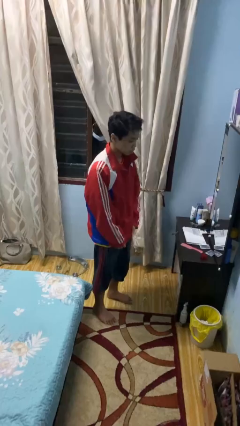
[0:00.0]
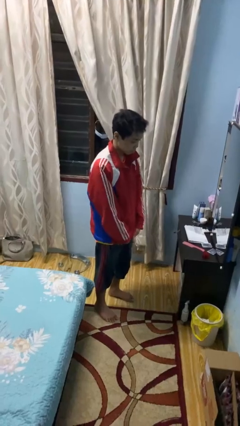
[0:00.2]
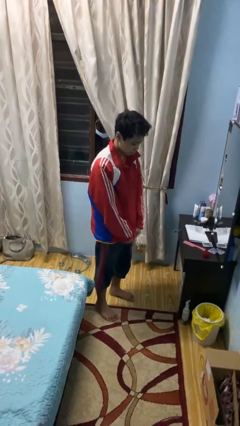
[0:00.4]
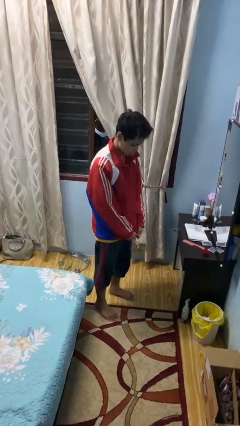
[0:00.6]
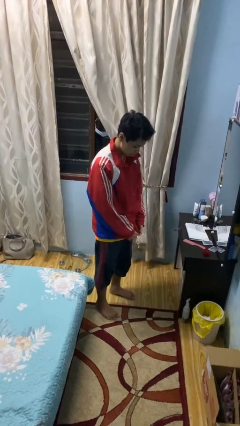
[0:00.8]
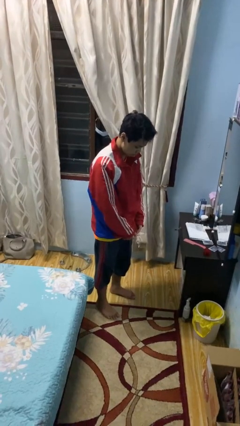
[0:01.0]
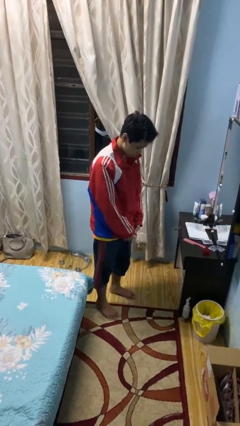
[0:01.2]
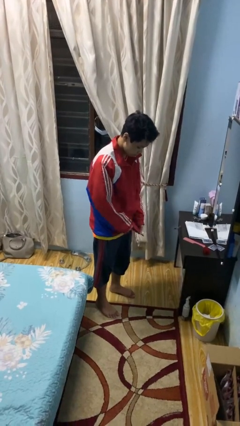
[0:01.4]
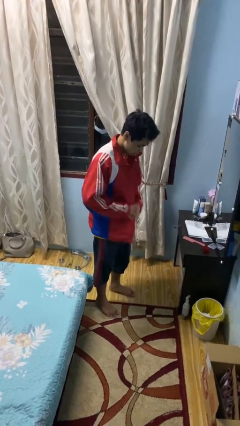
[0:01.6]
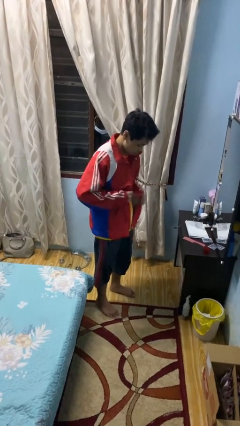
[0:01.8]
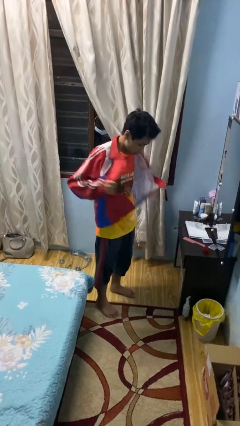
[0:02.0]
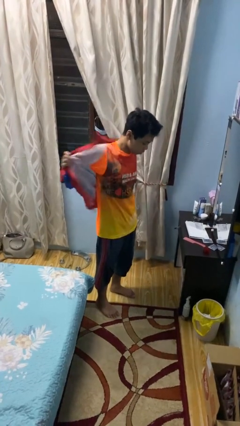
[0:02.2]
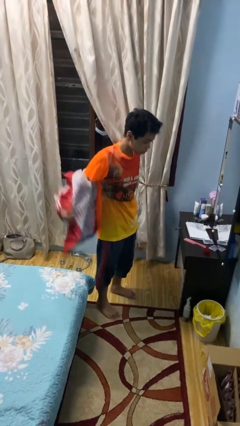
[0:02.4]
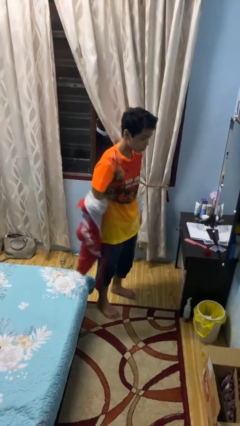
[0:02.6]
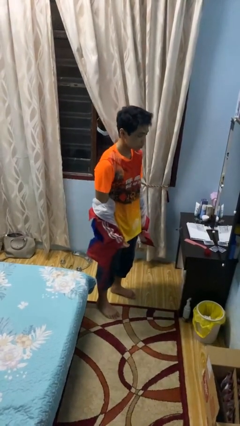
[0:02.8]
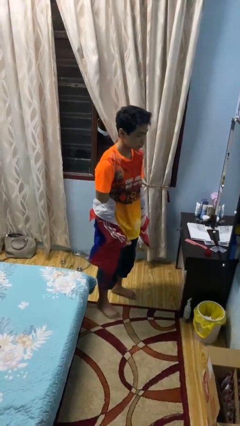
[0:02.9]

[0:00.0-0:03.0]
person takes off jacket

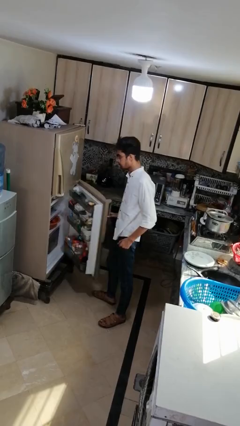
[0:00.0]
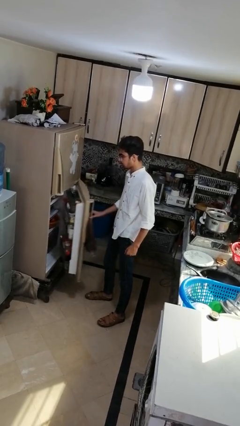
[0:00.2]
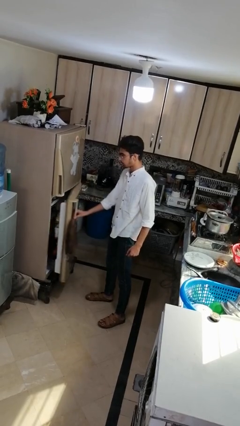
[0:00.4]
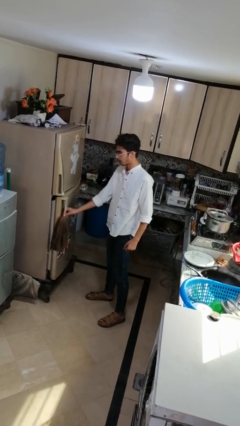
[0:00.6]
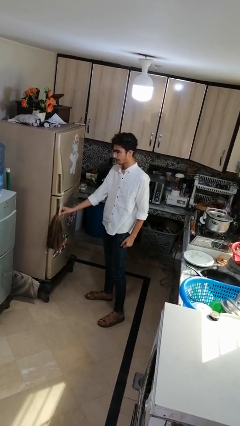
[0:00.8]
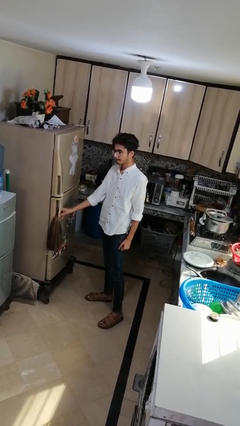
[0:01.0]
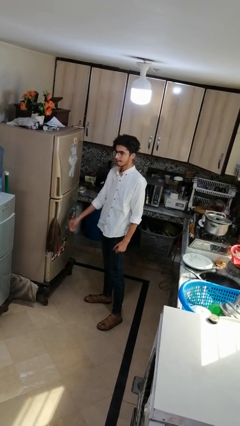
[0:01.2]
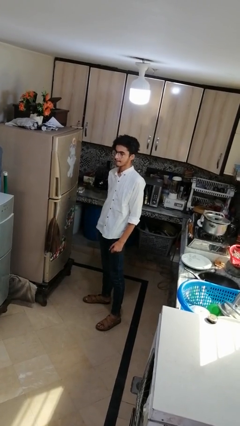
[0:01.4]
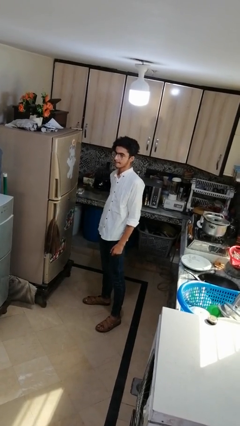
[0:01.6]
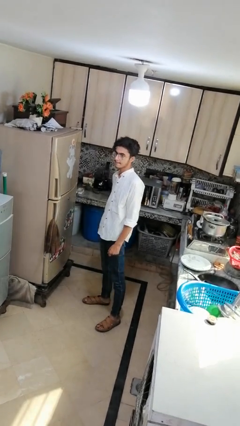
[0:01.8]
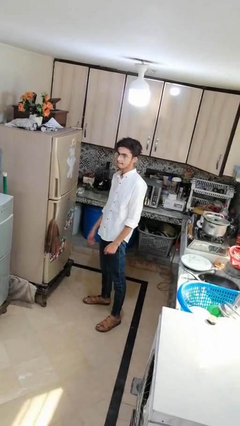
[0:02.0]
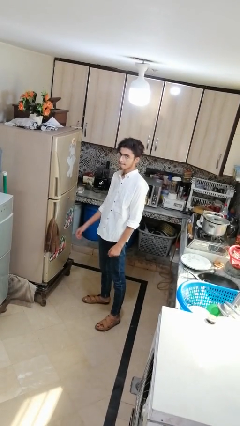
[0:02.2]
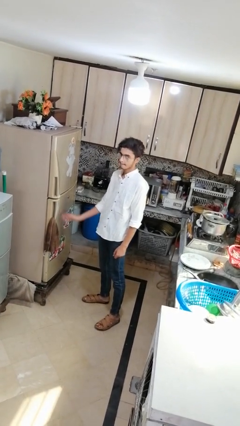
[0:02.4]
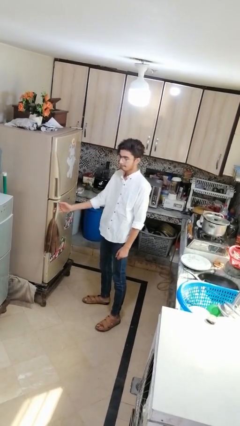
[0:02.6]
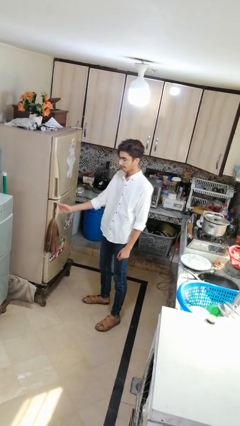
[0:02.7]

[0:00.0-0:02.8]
person closes refrigerator

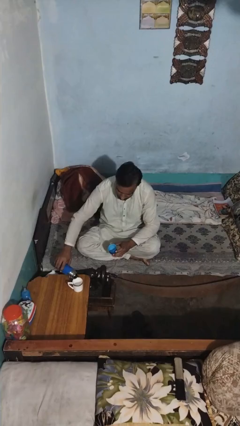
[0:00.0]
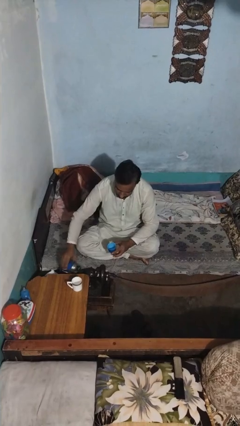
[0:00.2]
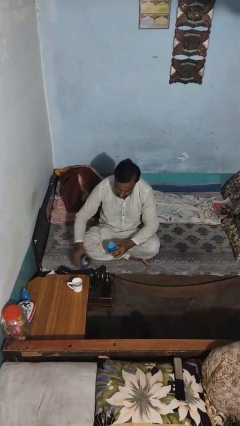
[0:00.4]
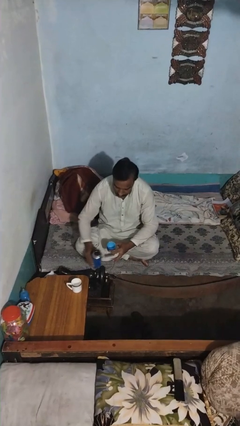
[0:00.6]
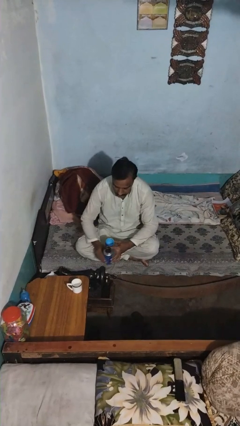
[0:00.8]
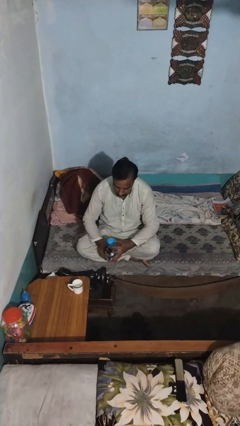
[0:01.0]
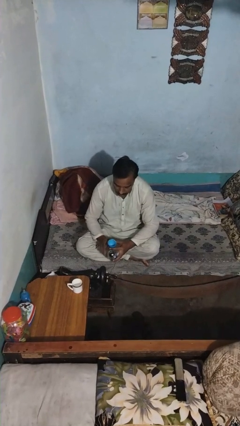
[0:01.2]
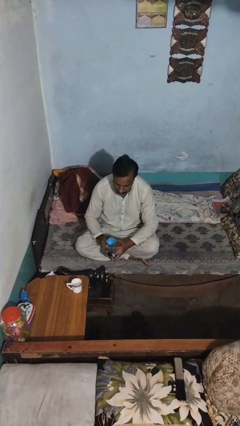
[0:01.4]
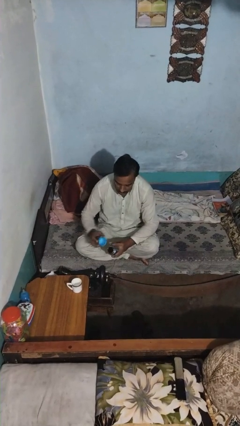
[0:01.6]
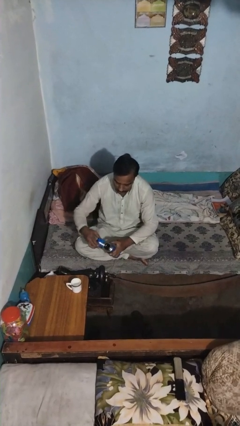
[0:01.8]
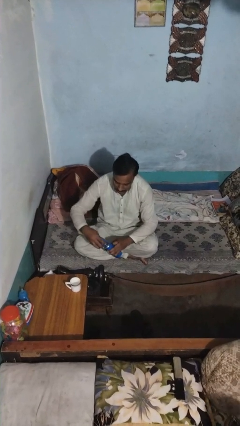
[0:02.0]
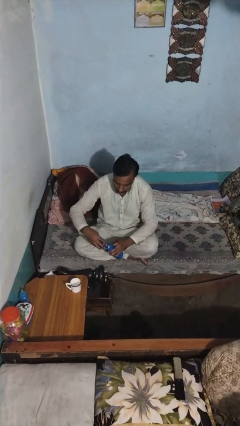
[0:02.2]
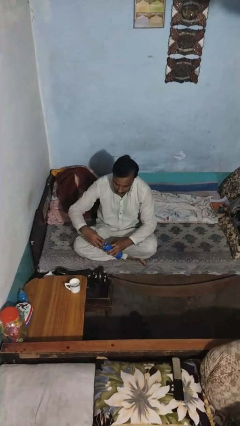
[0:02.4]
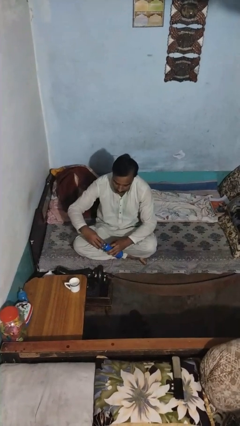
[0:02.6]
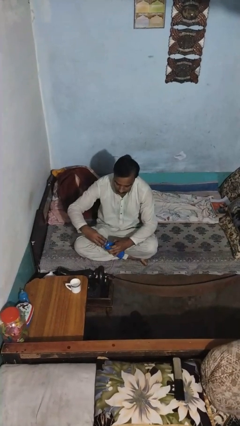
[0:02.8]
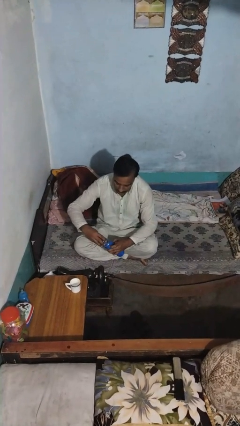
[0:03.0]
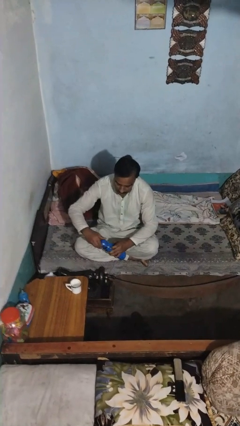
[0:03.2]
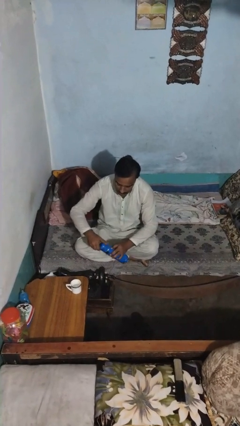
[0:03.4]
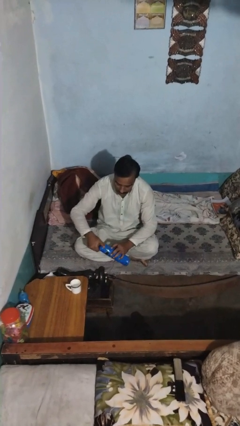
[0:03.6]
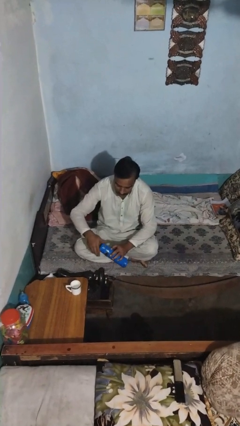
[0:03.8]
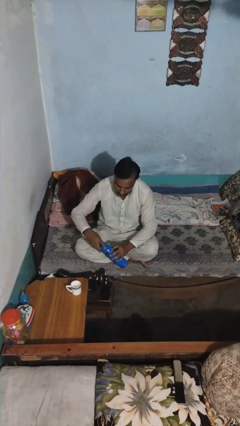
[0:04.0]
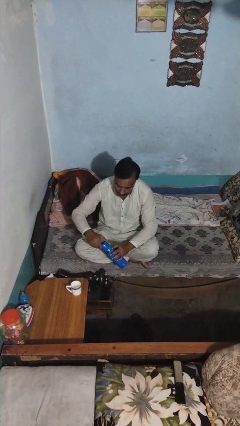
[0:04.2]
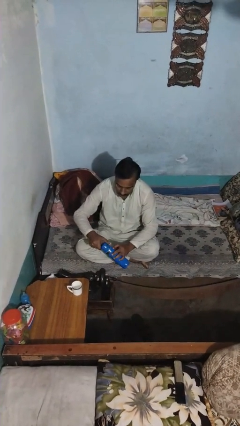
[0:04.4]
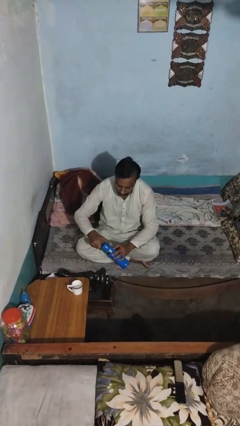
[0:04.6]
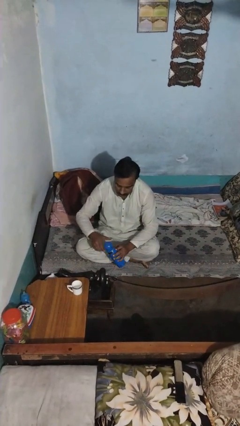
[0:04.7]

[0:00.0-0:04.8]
person screws lid to bottle

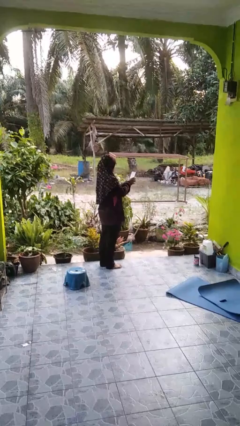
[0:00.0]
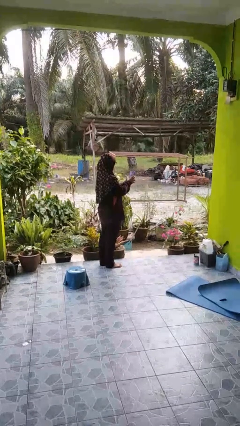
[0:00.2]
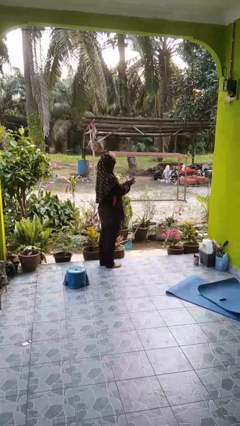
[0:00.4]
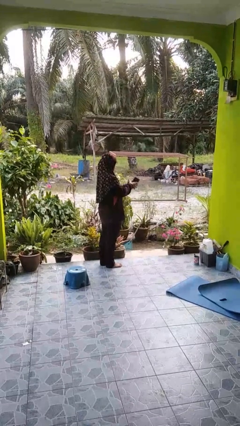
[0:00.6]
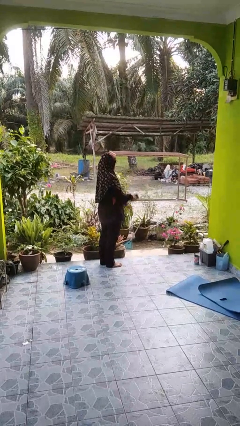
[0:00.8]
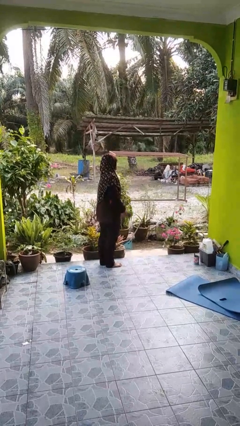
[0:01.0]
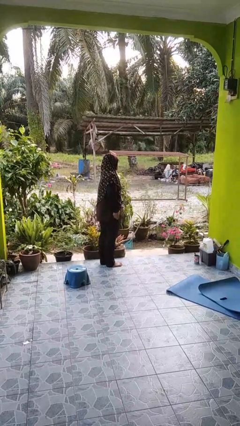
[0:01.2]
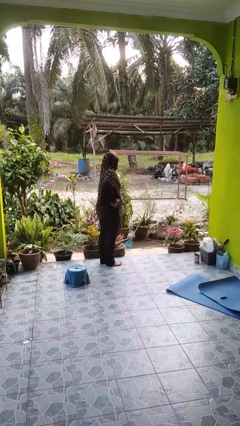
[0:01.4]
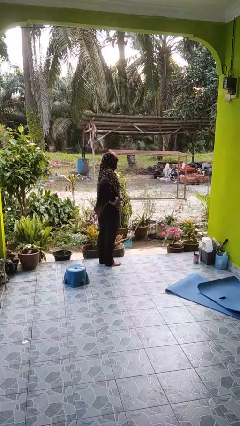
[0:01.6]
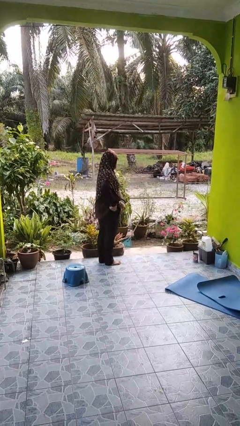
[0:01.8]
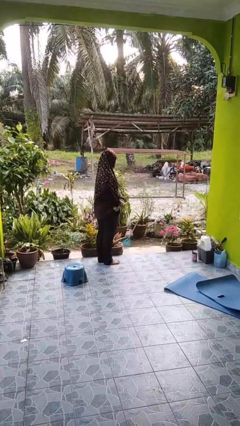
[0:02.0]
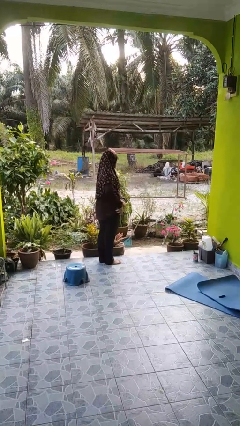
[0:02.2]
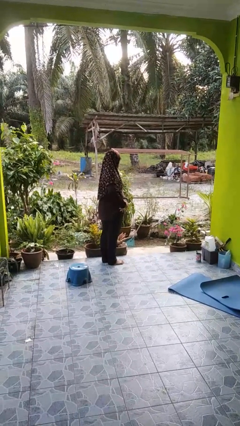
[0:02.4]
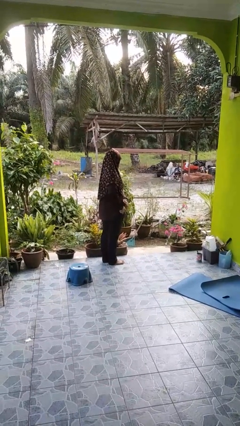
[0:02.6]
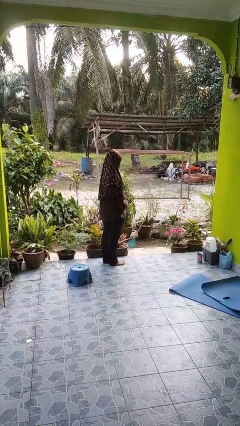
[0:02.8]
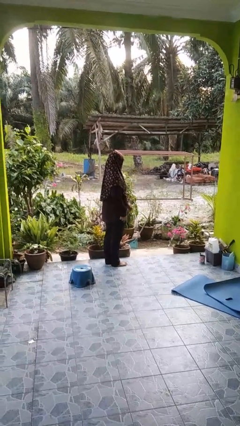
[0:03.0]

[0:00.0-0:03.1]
person puts phone into pocket

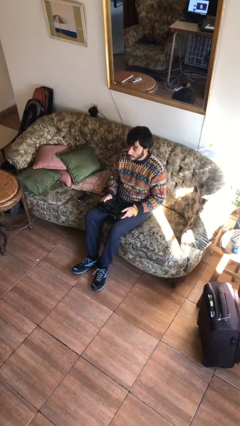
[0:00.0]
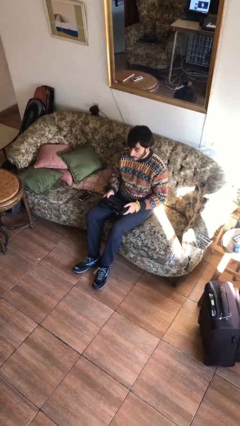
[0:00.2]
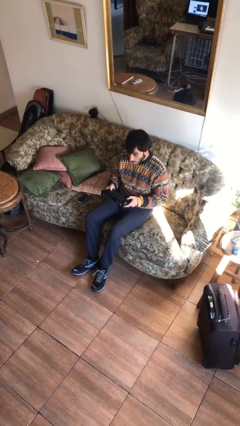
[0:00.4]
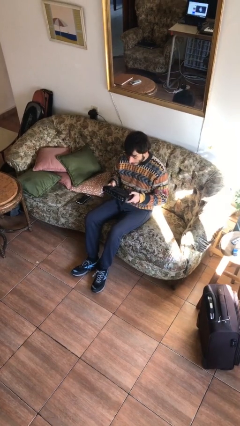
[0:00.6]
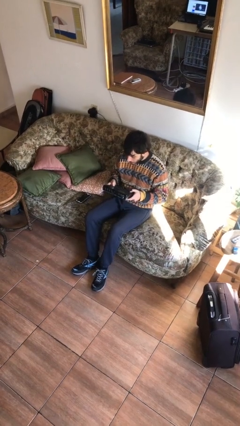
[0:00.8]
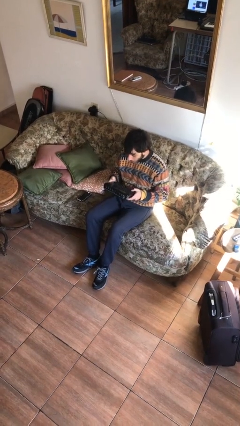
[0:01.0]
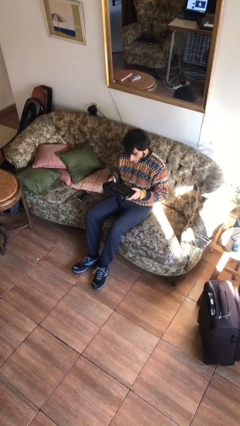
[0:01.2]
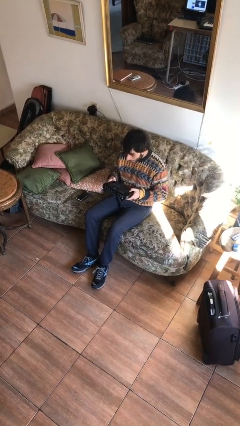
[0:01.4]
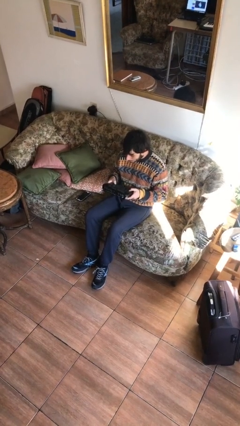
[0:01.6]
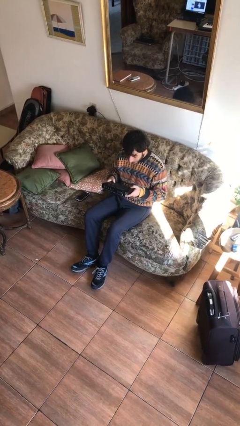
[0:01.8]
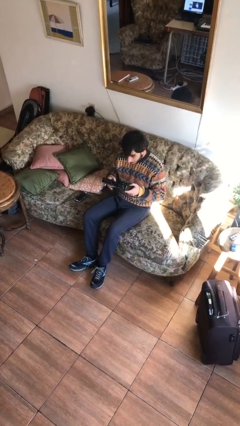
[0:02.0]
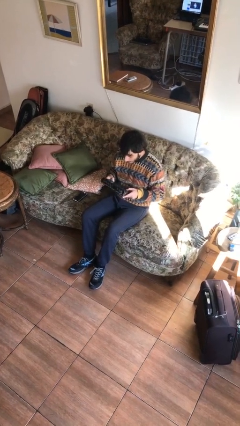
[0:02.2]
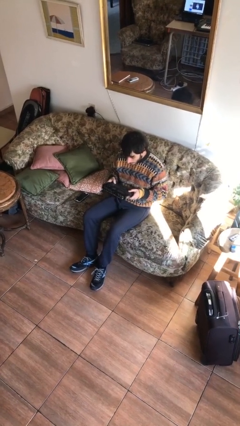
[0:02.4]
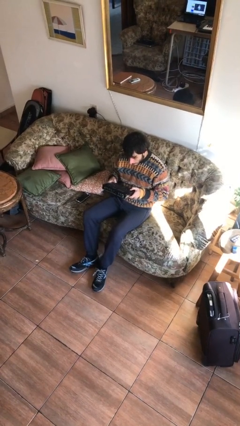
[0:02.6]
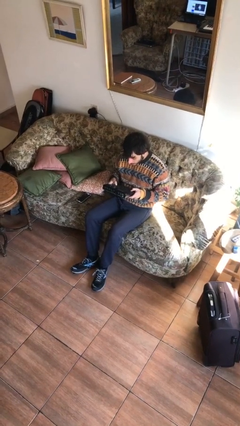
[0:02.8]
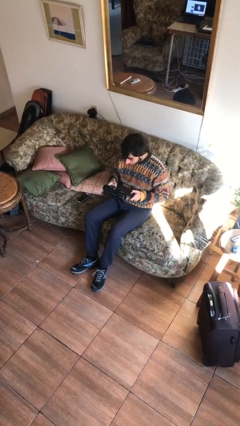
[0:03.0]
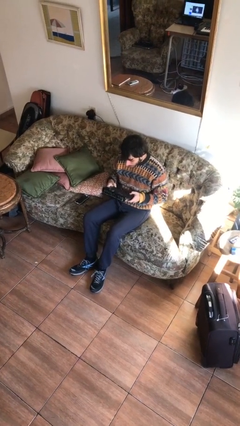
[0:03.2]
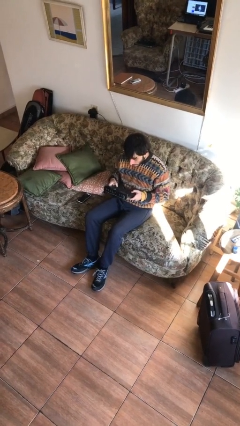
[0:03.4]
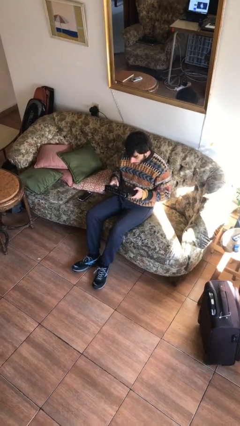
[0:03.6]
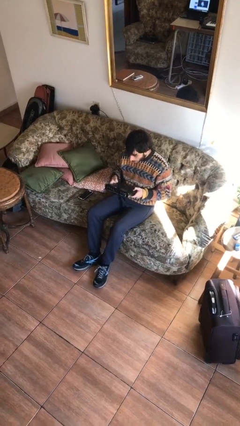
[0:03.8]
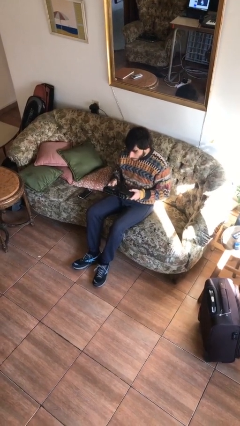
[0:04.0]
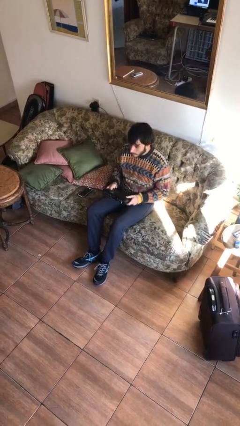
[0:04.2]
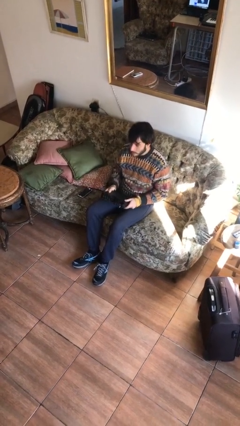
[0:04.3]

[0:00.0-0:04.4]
person interacts with handheld game
